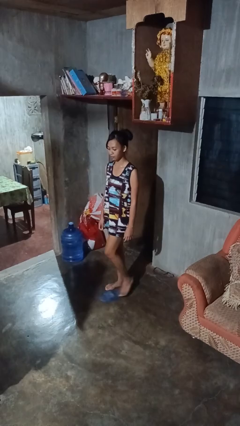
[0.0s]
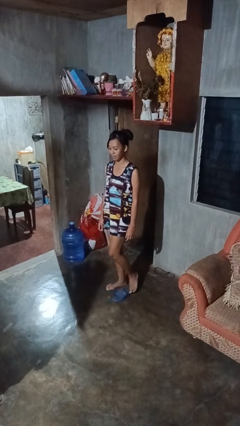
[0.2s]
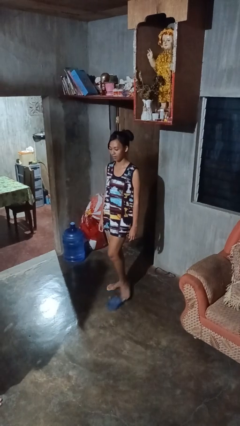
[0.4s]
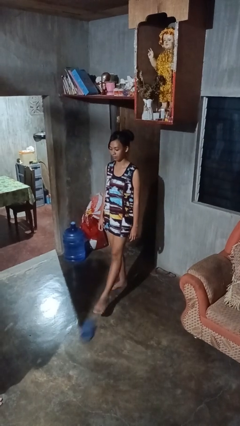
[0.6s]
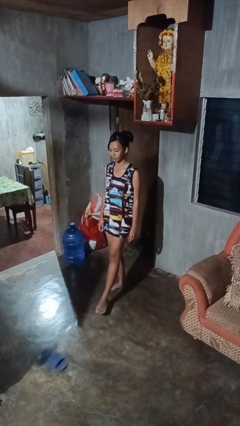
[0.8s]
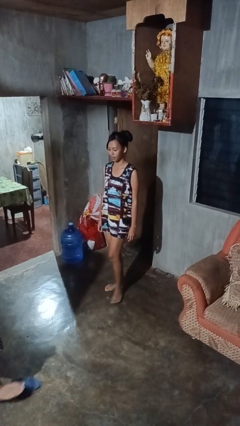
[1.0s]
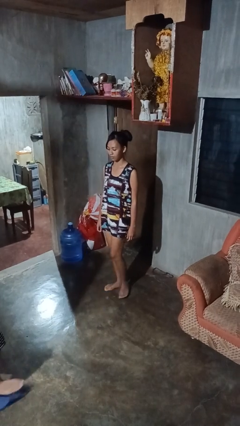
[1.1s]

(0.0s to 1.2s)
person kicks object to person

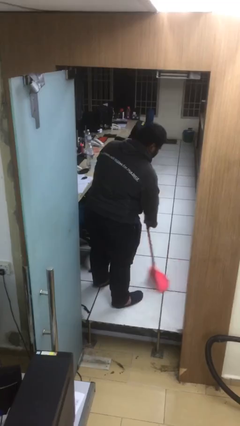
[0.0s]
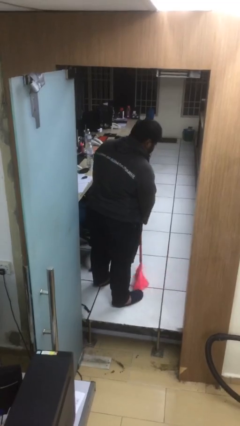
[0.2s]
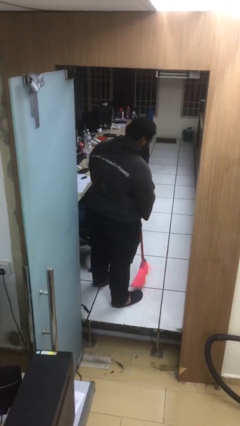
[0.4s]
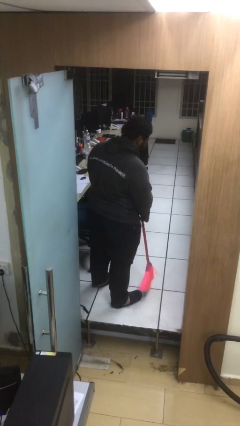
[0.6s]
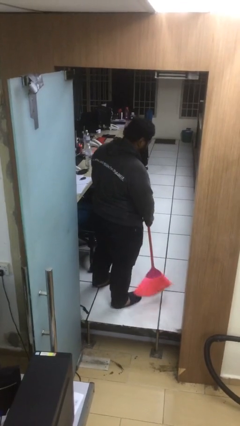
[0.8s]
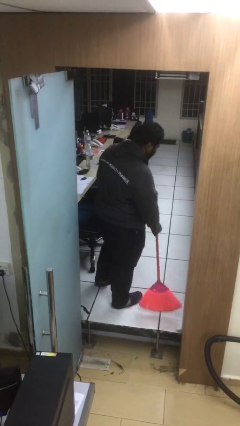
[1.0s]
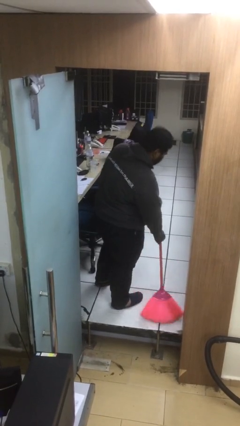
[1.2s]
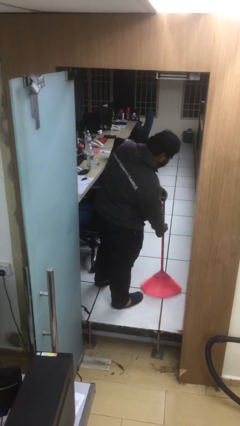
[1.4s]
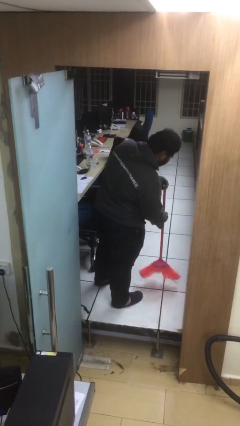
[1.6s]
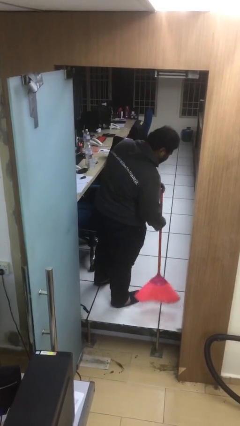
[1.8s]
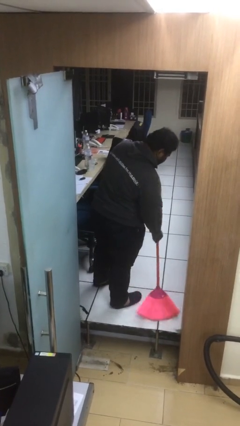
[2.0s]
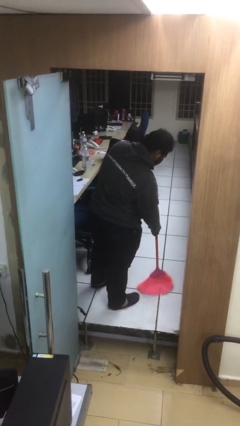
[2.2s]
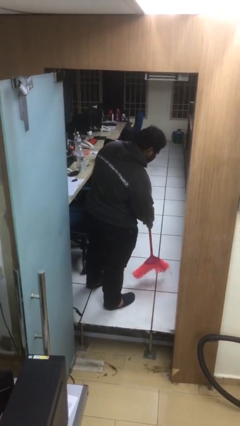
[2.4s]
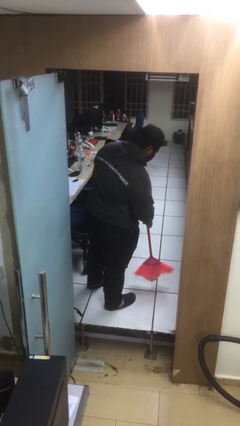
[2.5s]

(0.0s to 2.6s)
person sweeps floor

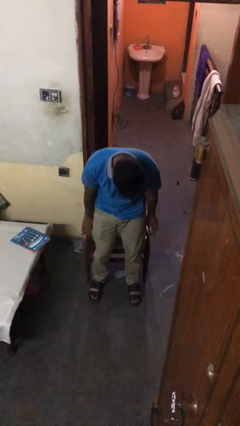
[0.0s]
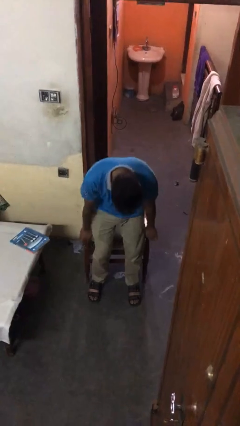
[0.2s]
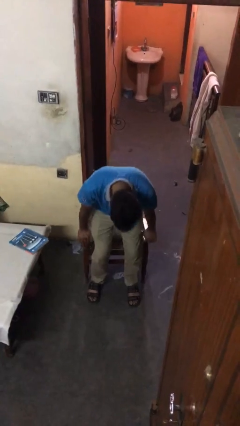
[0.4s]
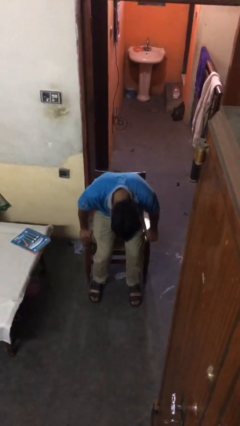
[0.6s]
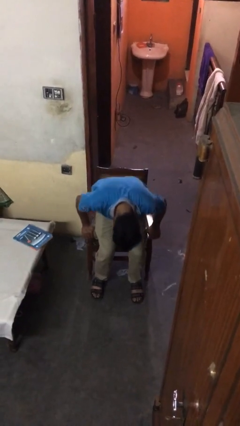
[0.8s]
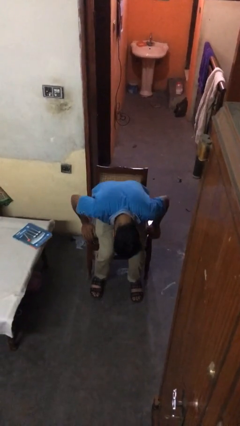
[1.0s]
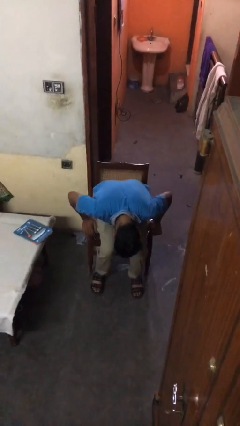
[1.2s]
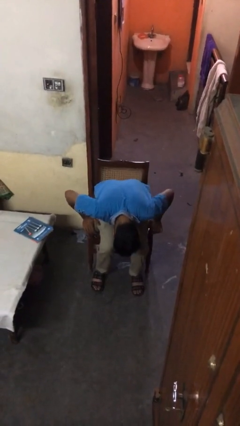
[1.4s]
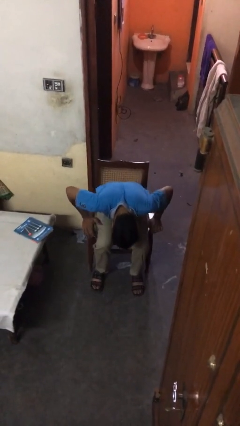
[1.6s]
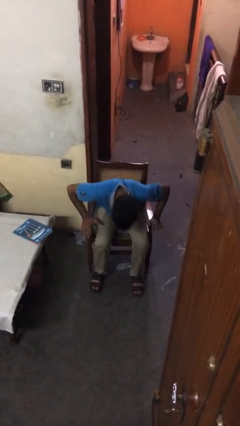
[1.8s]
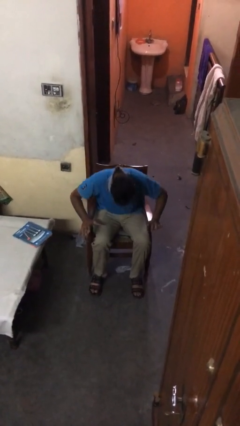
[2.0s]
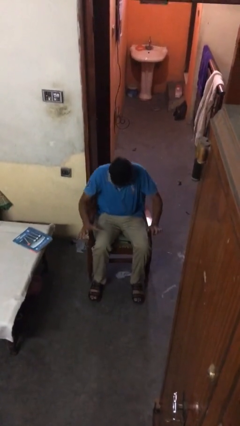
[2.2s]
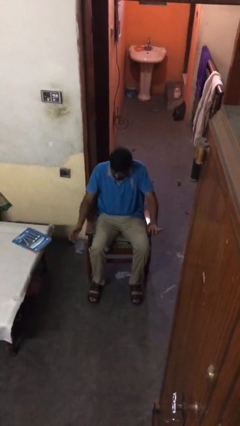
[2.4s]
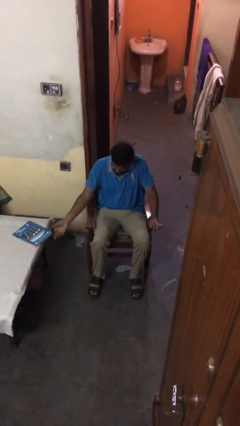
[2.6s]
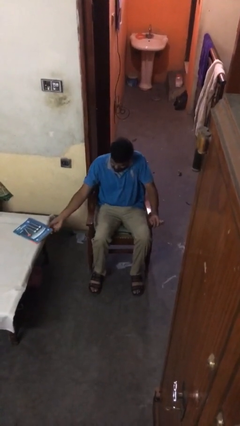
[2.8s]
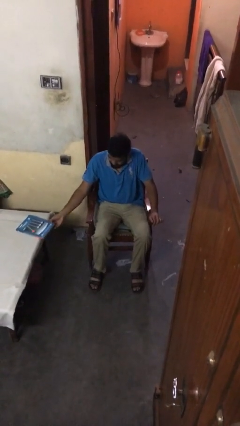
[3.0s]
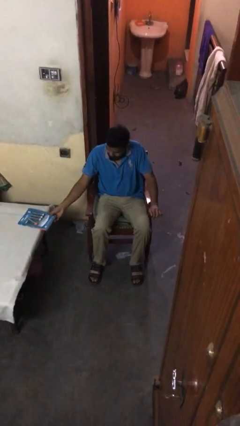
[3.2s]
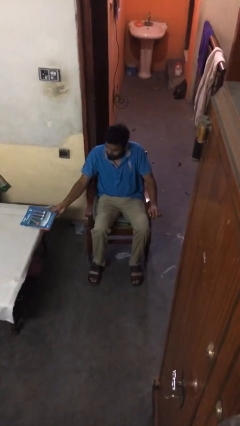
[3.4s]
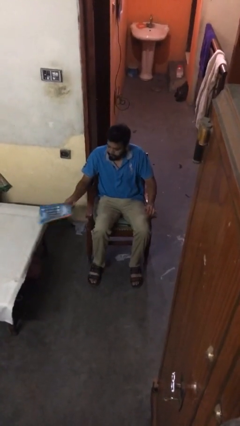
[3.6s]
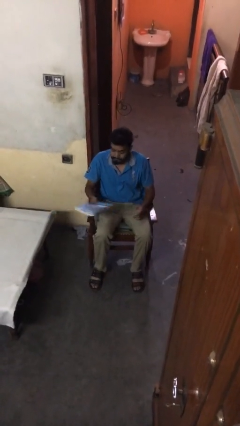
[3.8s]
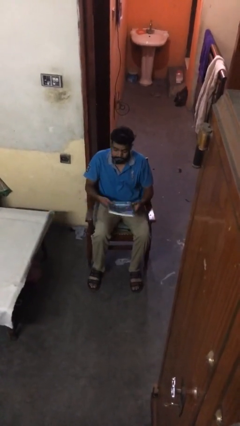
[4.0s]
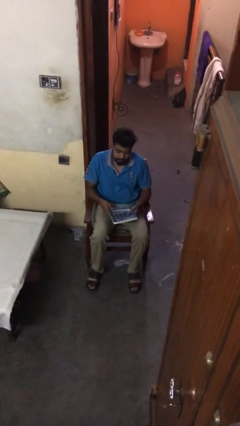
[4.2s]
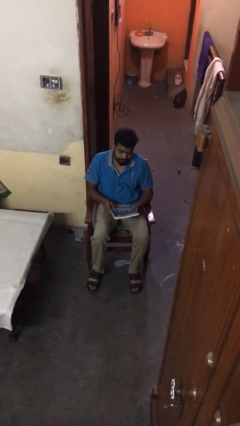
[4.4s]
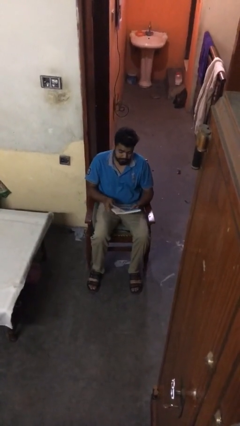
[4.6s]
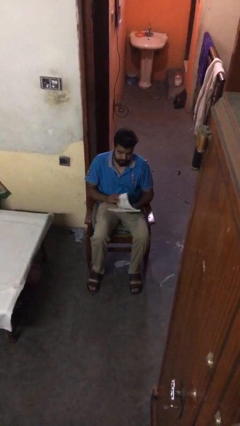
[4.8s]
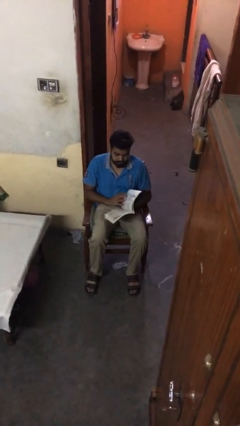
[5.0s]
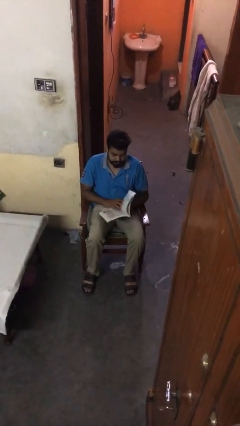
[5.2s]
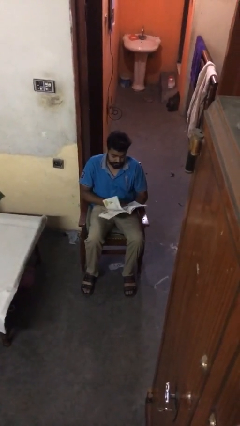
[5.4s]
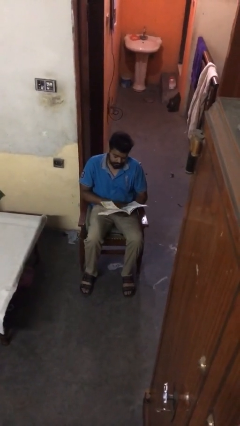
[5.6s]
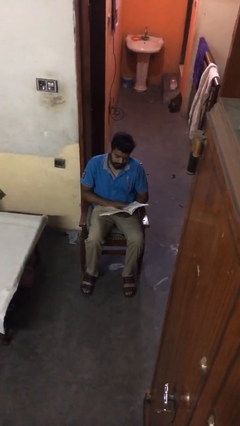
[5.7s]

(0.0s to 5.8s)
person sits down

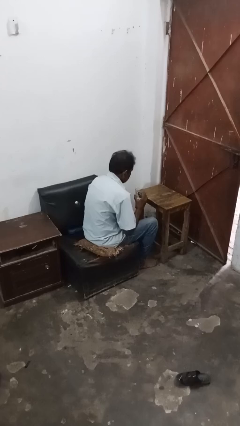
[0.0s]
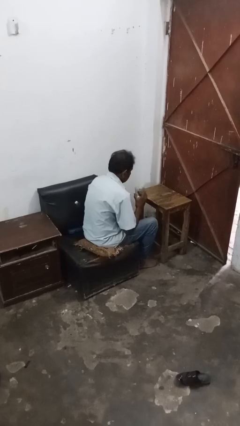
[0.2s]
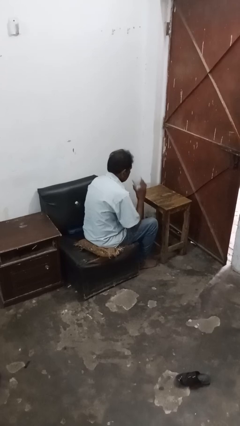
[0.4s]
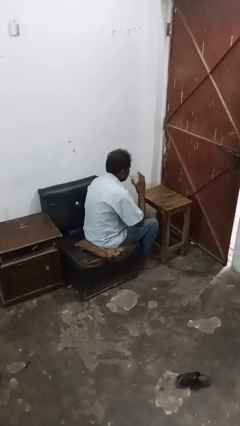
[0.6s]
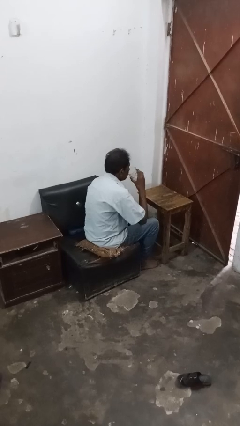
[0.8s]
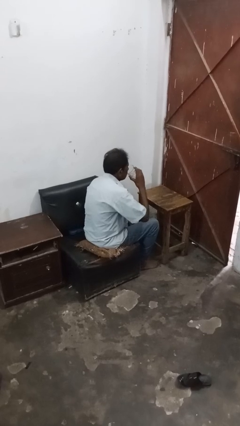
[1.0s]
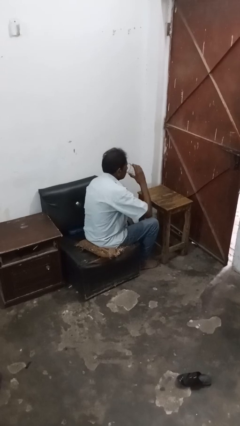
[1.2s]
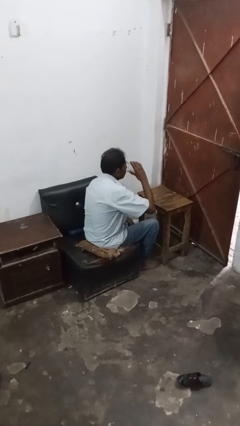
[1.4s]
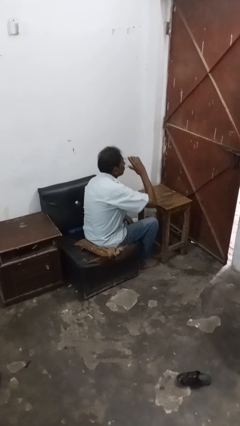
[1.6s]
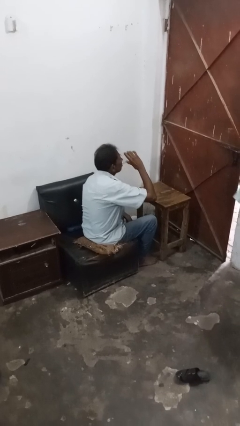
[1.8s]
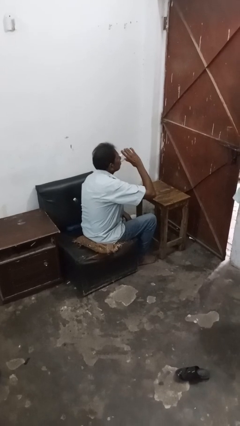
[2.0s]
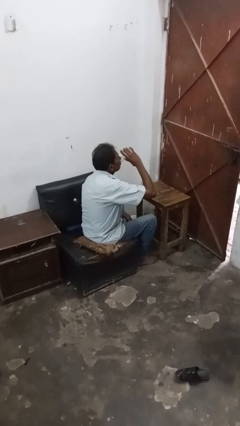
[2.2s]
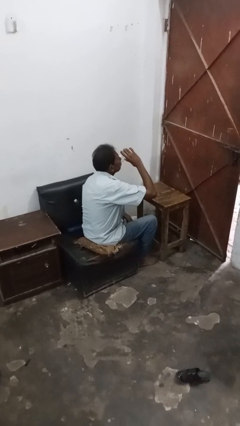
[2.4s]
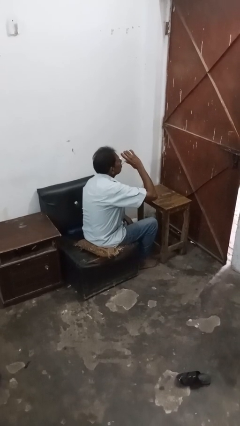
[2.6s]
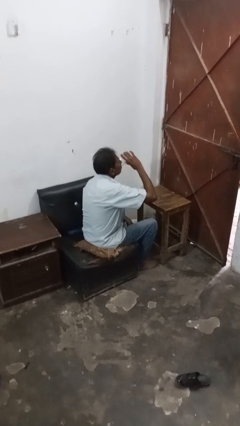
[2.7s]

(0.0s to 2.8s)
person drinks from shotglass

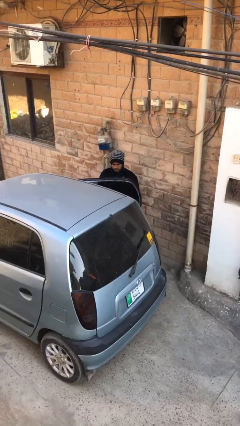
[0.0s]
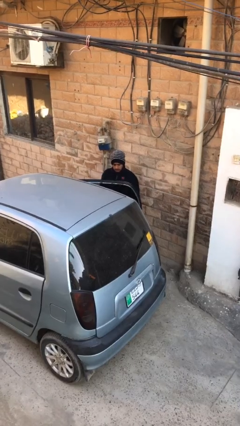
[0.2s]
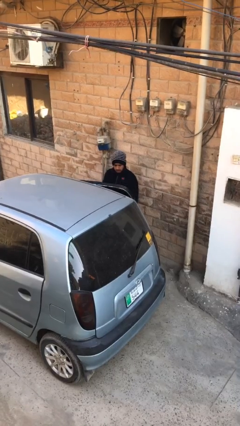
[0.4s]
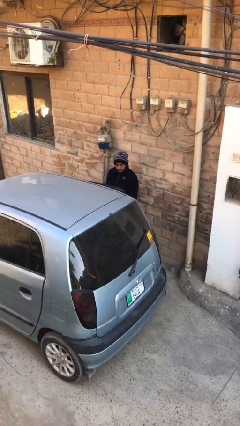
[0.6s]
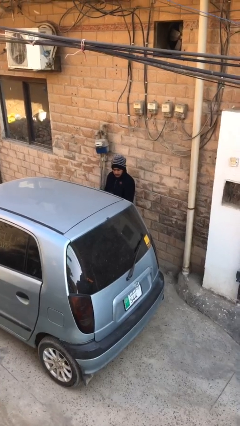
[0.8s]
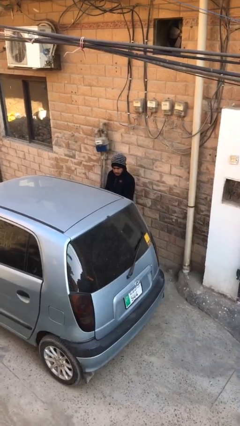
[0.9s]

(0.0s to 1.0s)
person closes car door

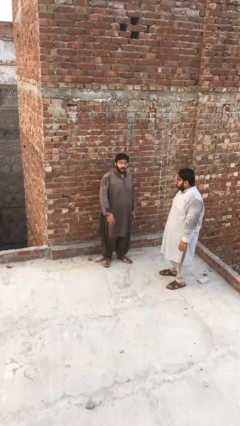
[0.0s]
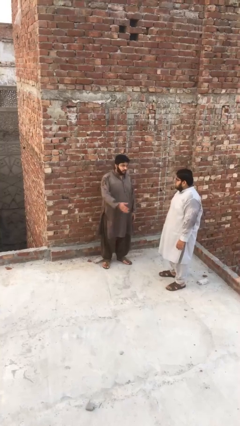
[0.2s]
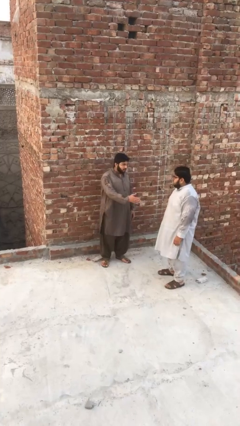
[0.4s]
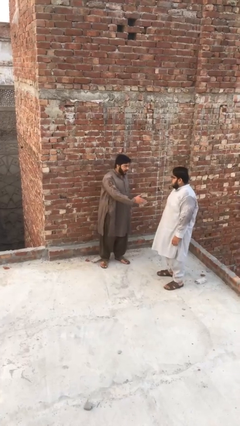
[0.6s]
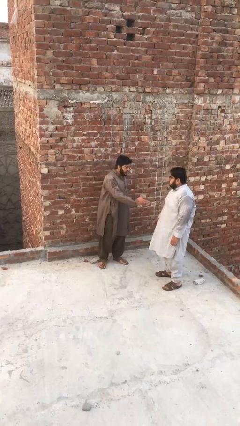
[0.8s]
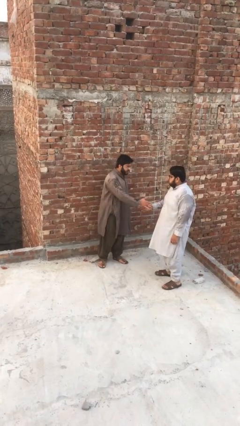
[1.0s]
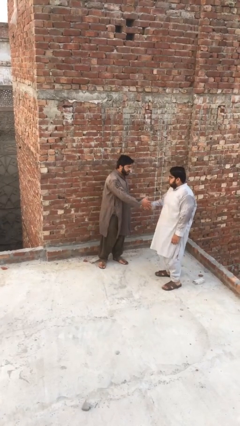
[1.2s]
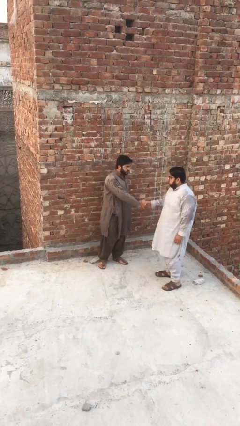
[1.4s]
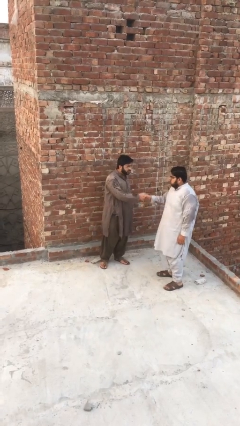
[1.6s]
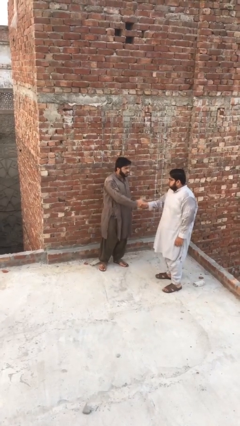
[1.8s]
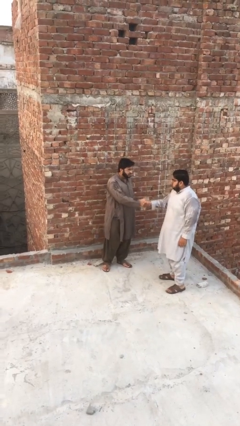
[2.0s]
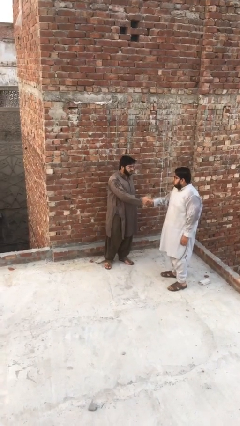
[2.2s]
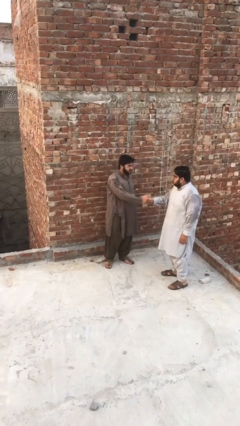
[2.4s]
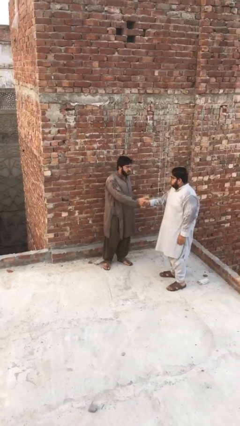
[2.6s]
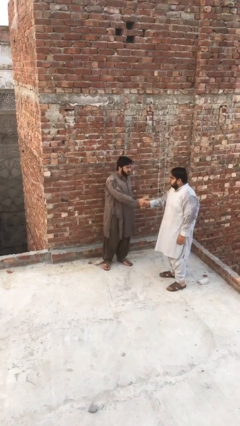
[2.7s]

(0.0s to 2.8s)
person shakes hand

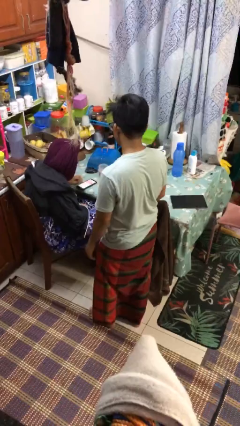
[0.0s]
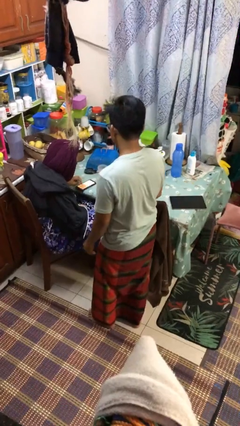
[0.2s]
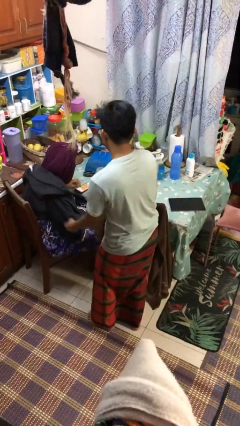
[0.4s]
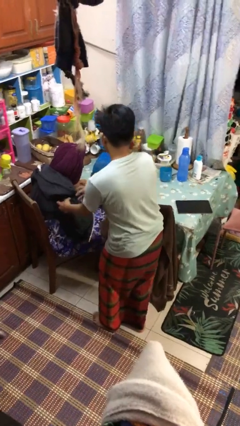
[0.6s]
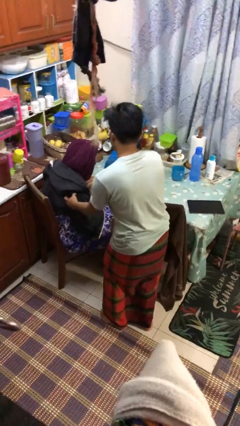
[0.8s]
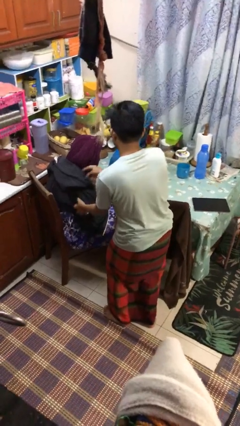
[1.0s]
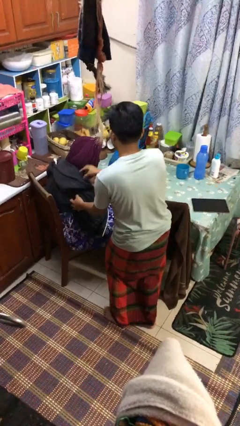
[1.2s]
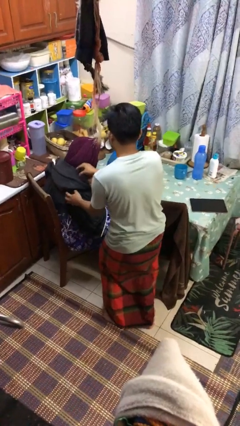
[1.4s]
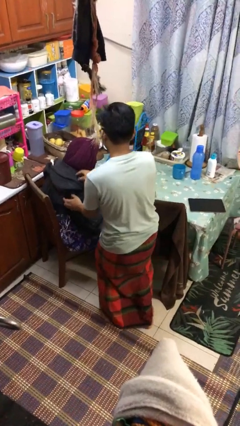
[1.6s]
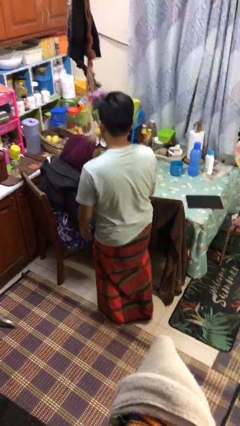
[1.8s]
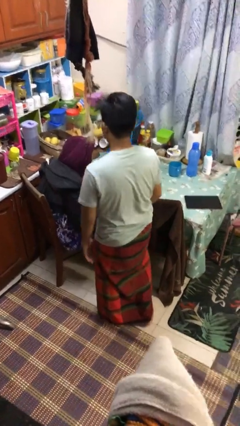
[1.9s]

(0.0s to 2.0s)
person tickles person
